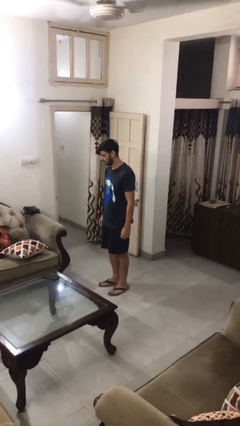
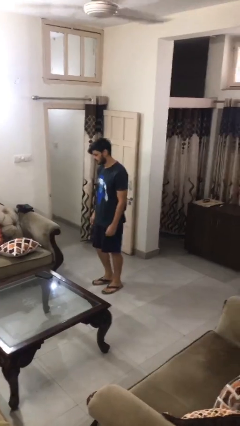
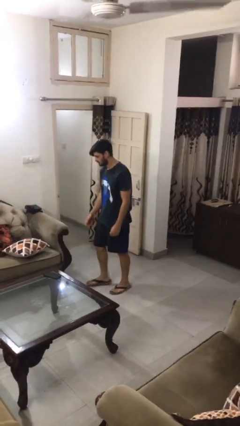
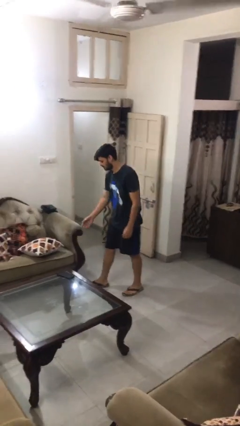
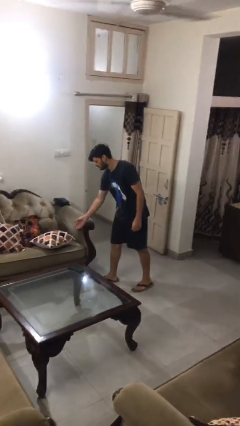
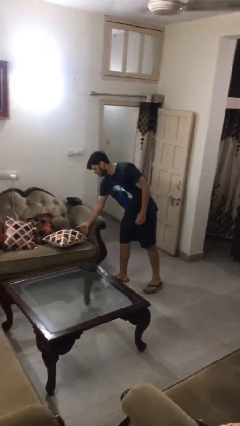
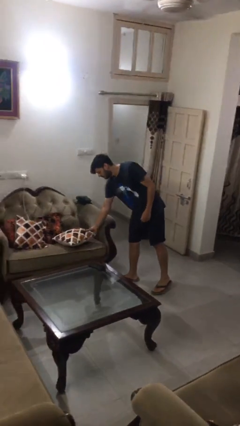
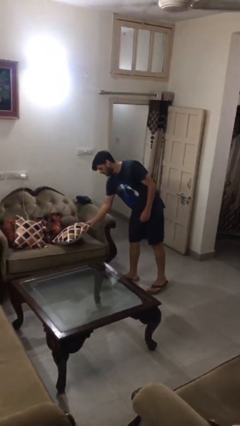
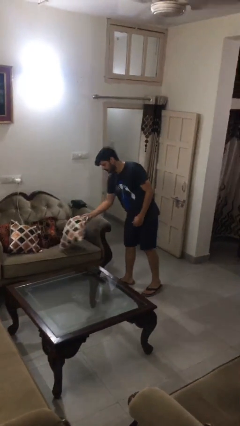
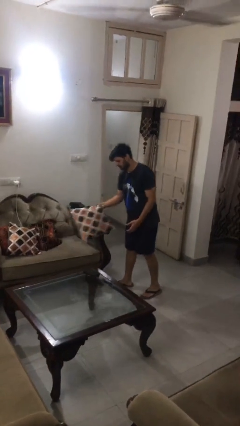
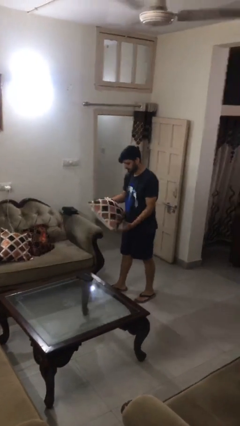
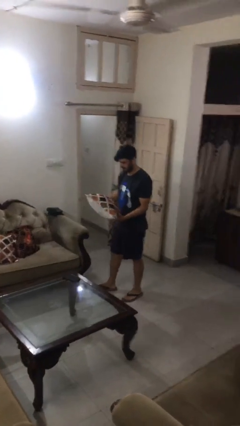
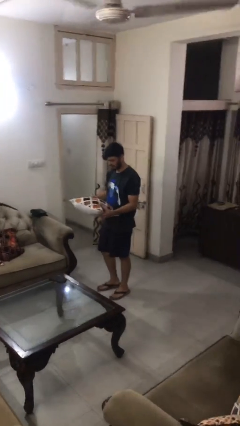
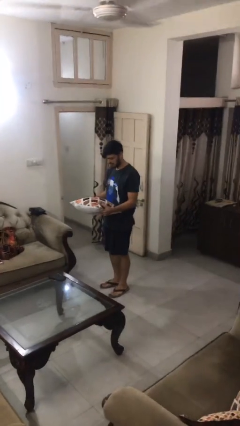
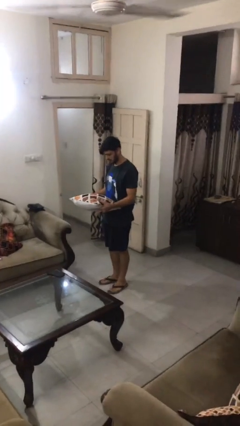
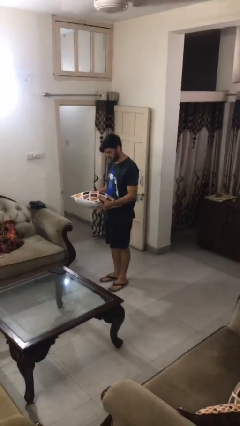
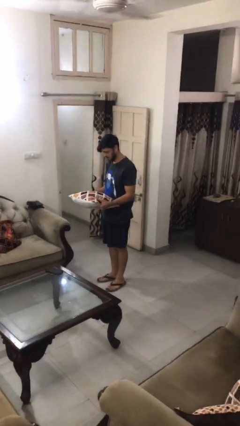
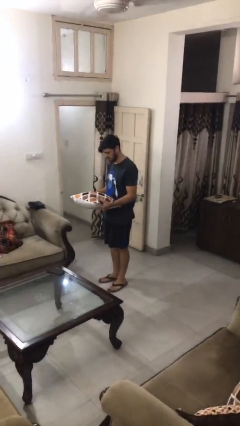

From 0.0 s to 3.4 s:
person picks up object from couch

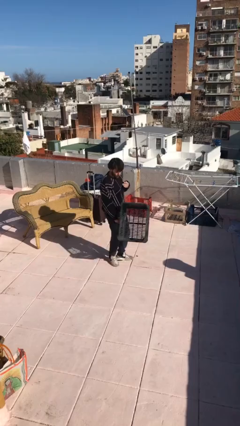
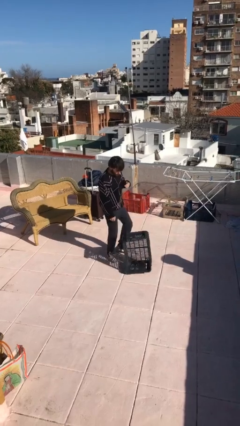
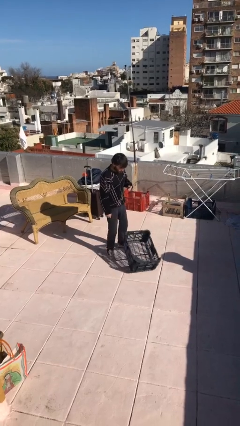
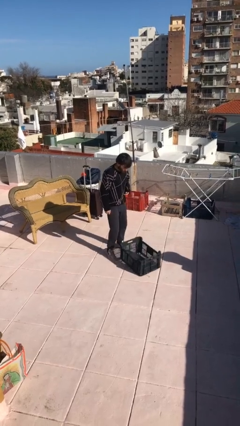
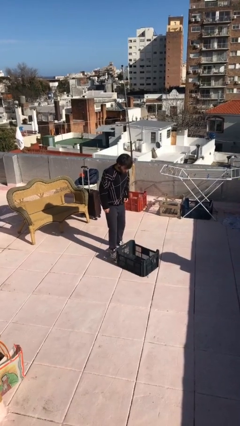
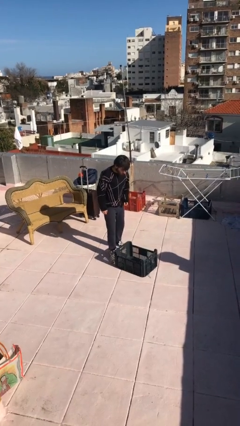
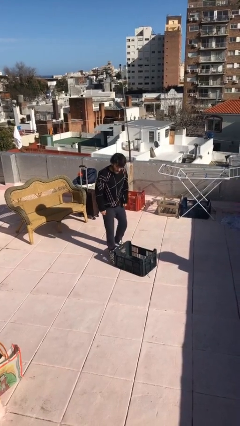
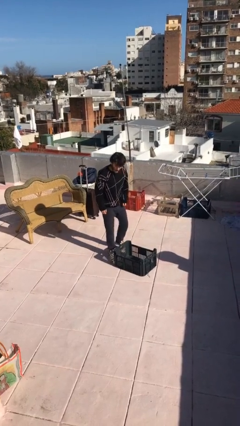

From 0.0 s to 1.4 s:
person drops object

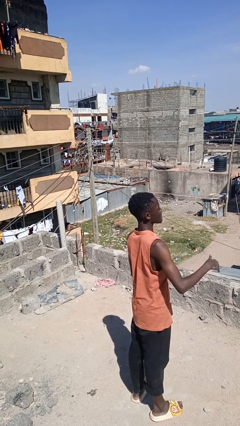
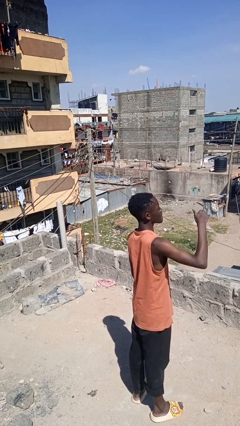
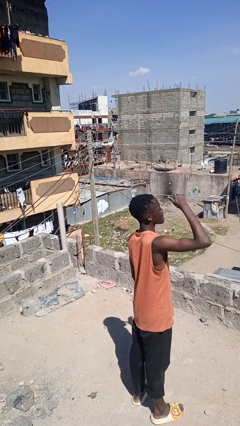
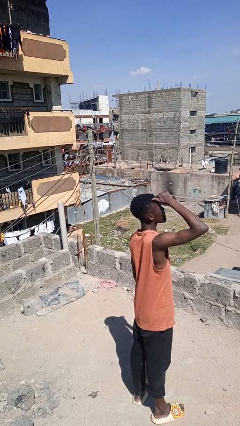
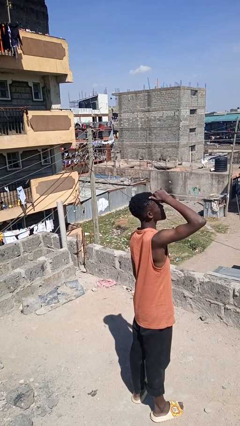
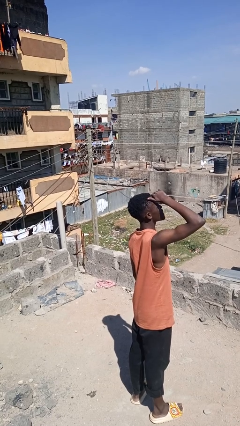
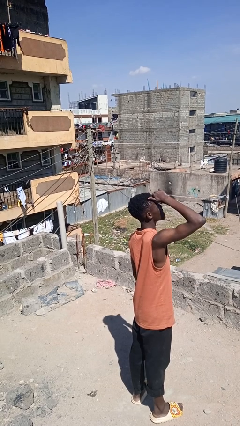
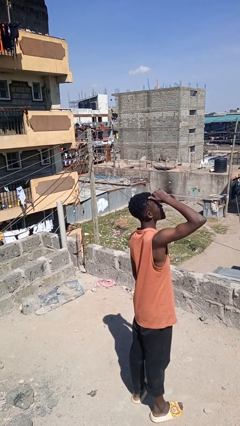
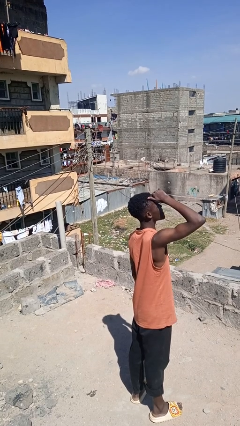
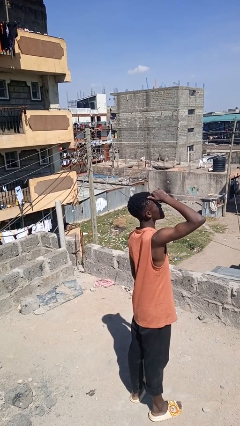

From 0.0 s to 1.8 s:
person shades eyes

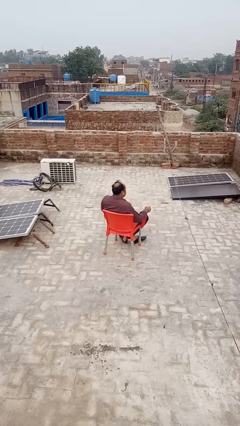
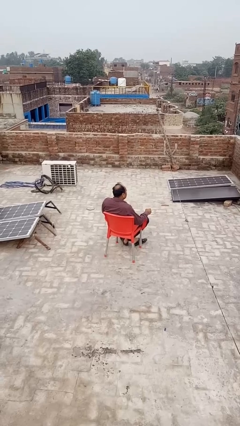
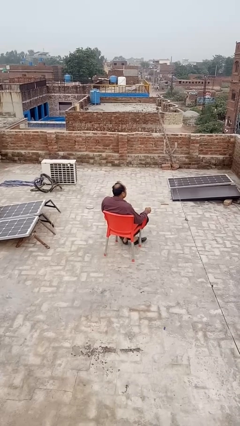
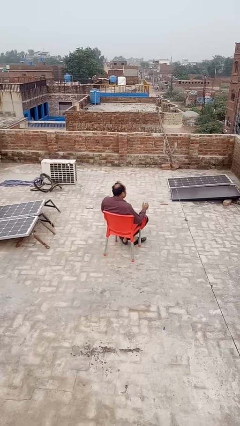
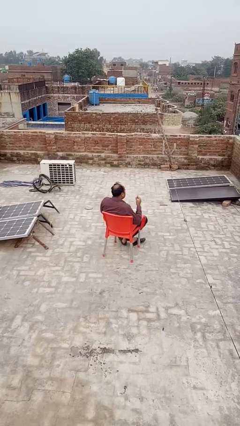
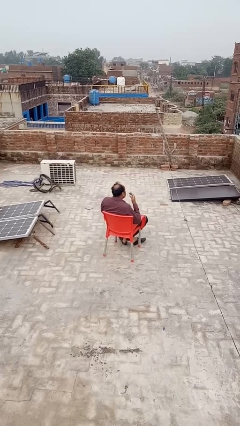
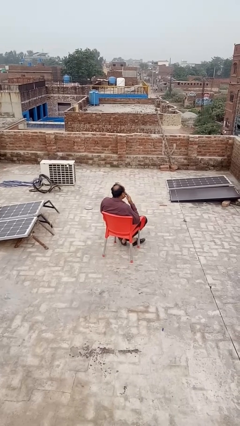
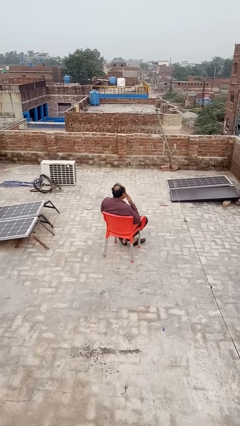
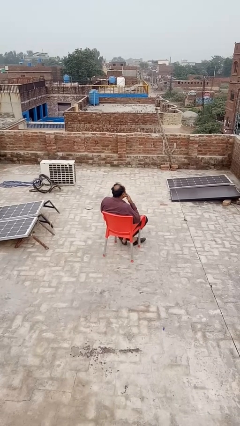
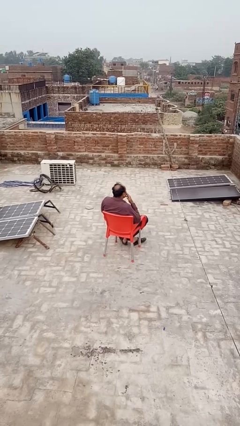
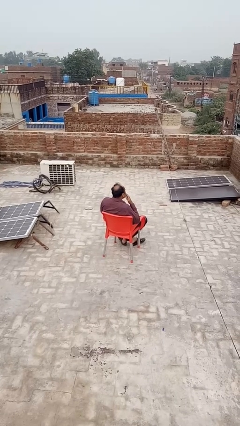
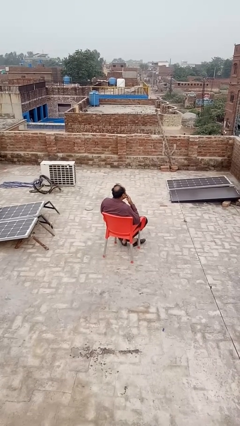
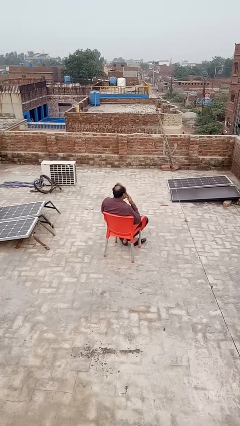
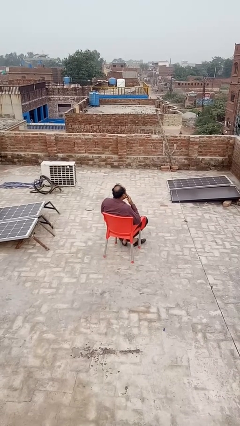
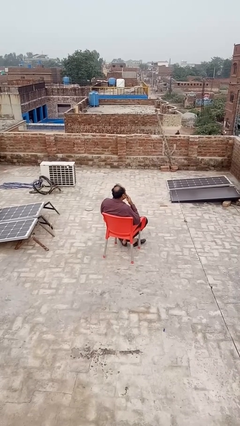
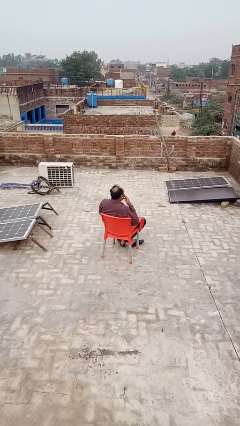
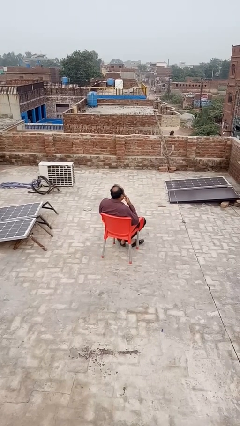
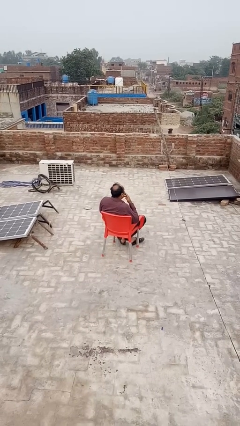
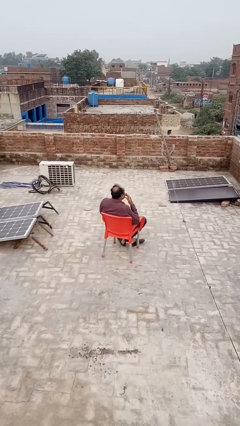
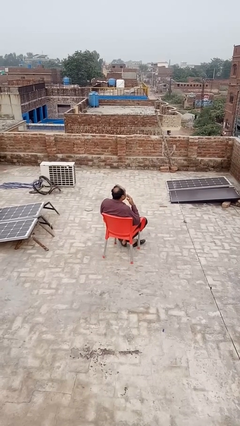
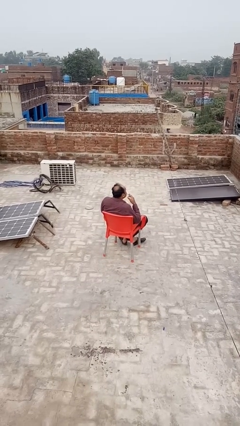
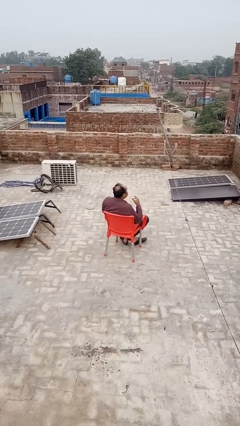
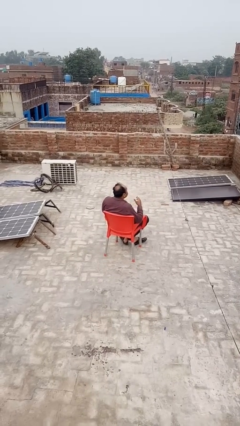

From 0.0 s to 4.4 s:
person vapes

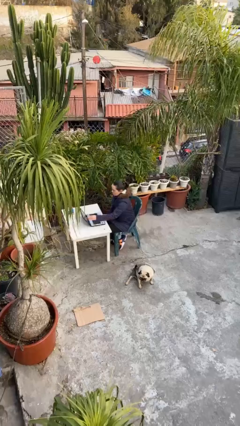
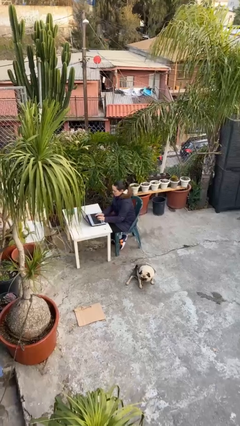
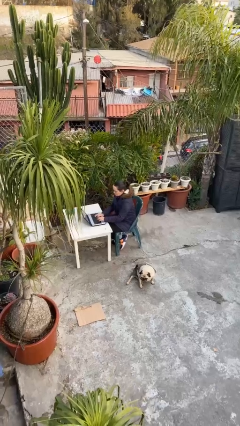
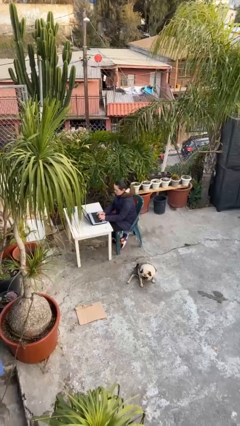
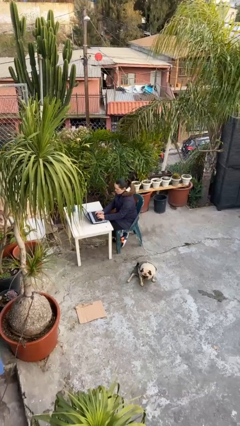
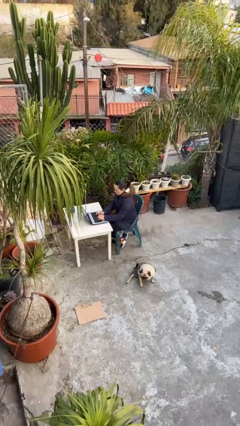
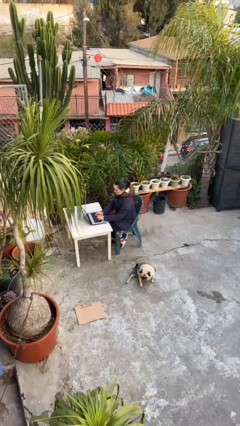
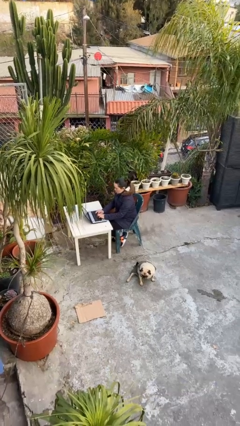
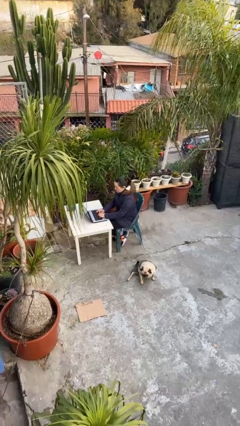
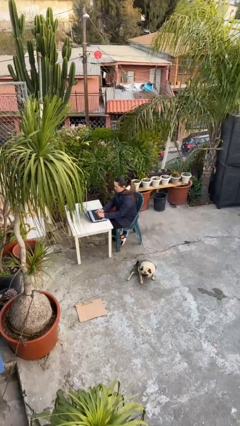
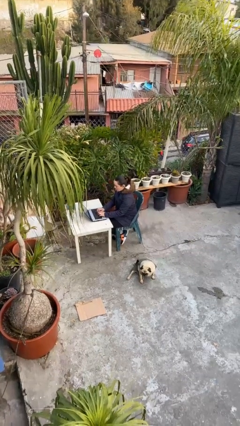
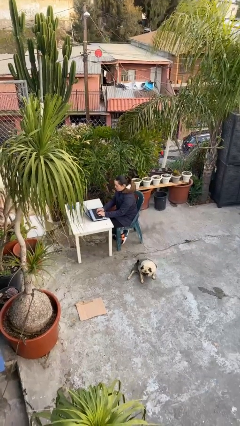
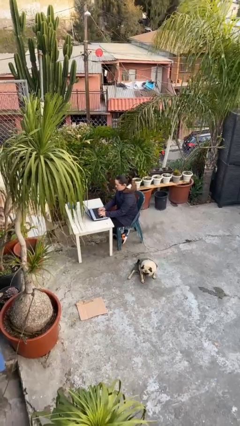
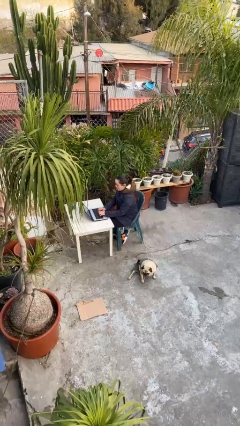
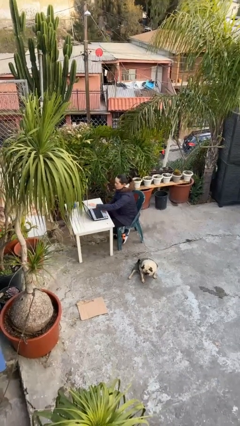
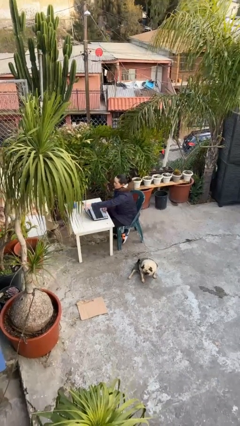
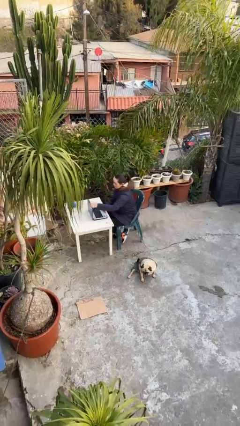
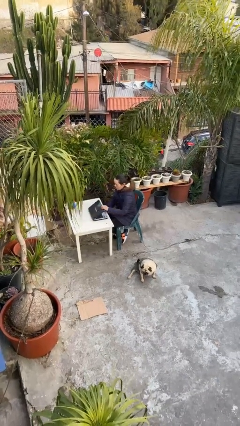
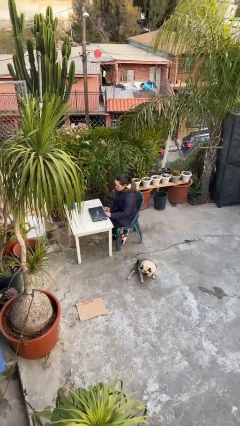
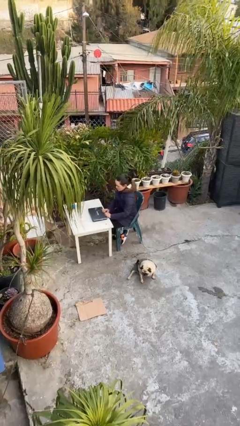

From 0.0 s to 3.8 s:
person interacts with laptop

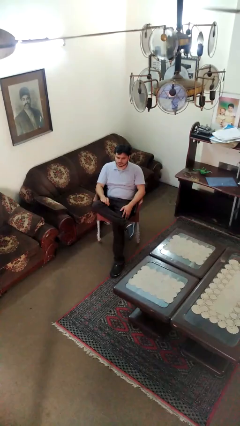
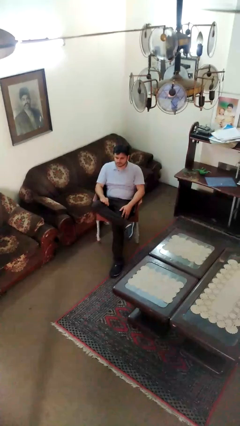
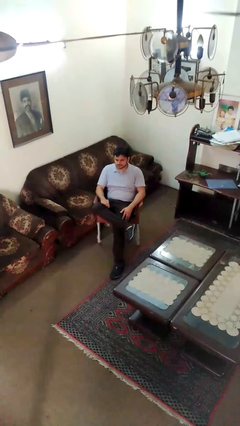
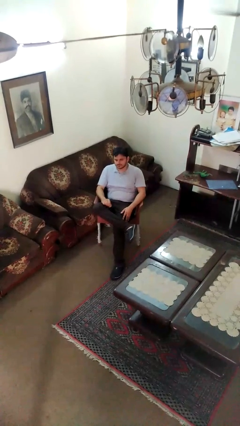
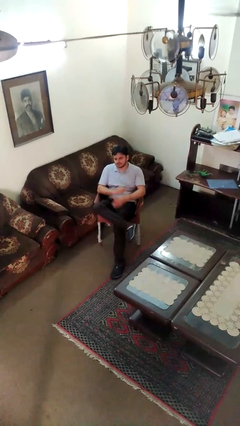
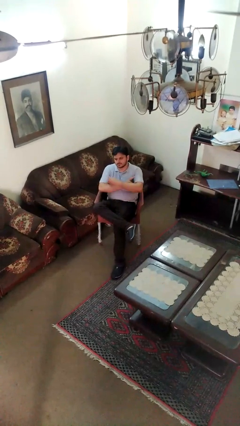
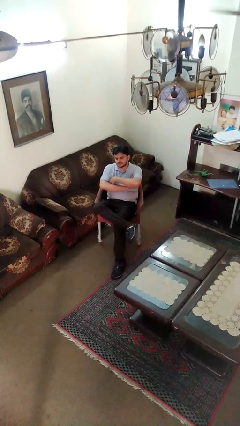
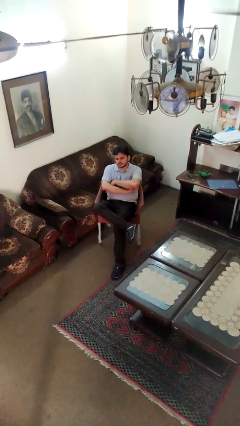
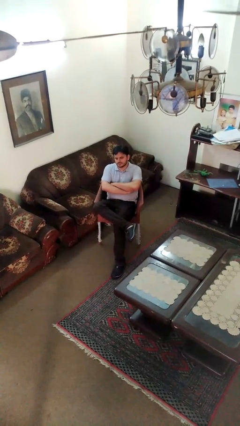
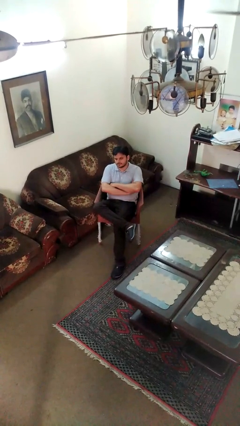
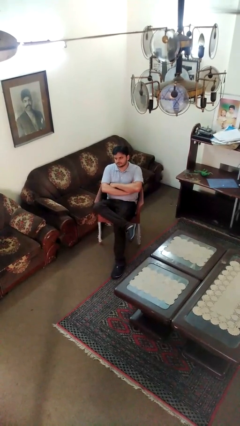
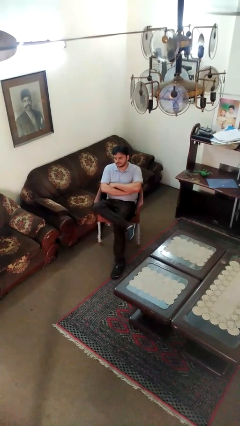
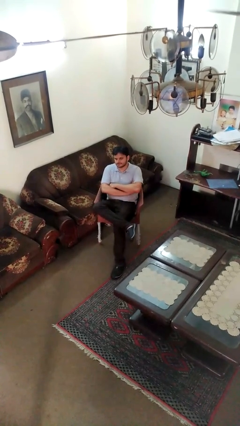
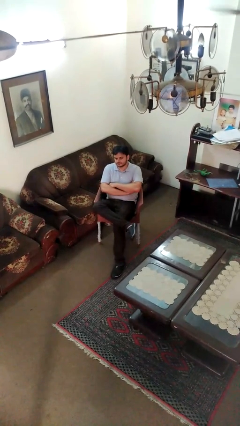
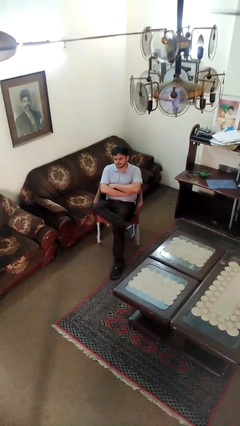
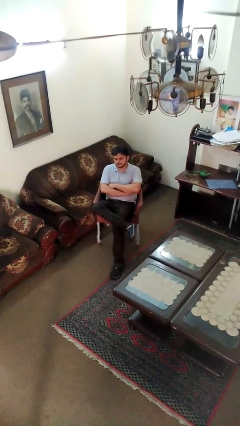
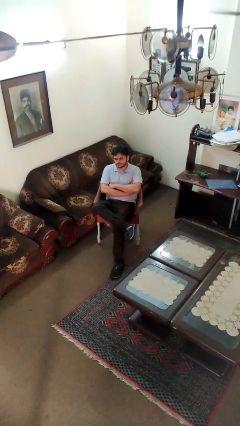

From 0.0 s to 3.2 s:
person crosses arms
